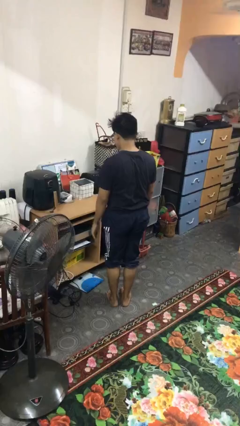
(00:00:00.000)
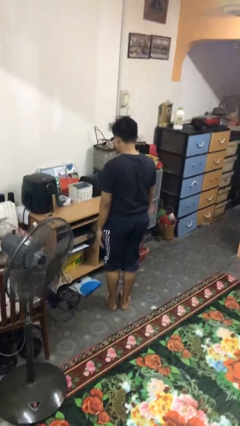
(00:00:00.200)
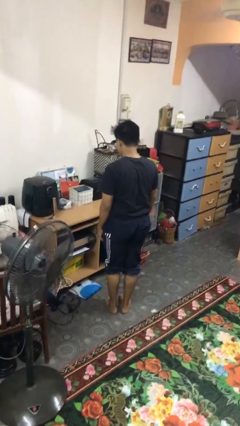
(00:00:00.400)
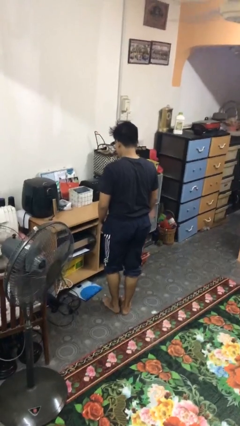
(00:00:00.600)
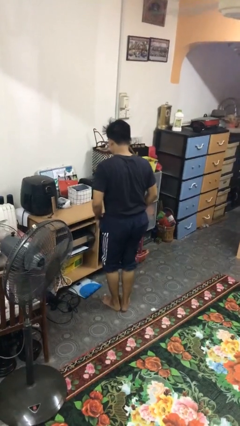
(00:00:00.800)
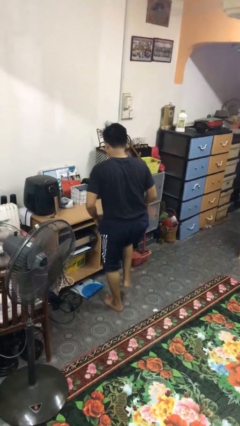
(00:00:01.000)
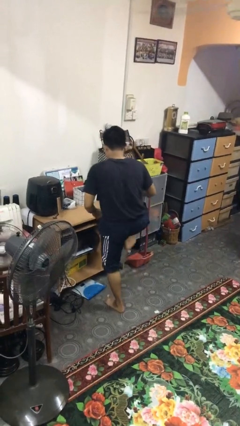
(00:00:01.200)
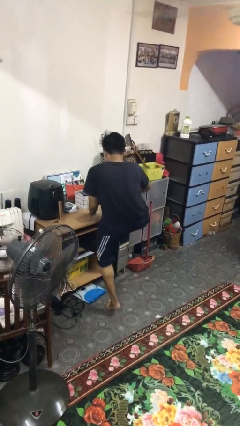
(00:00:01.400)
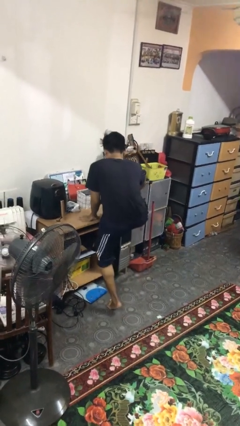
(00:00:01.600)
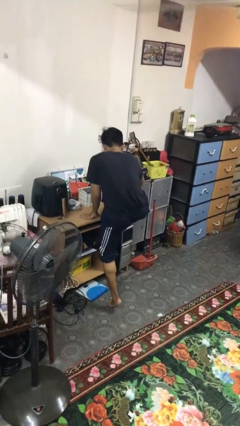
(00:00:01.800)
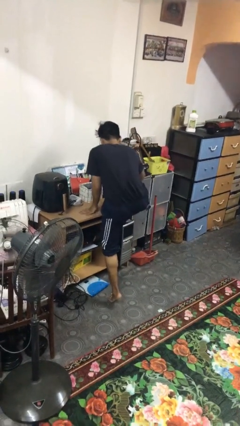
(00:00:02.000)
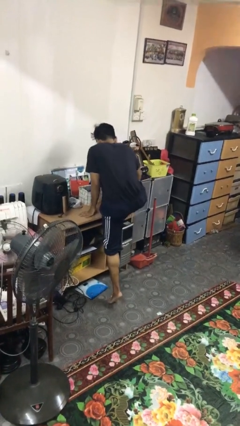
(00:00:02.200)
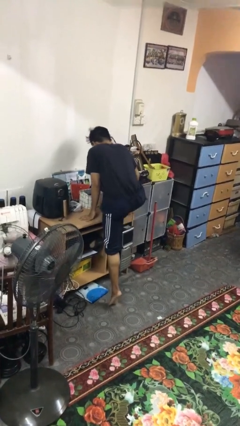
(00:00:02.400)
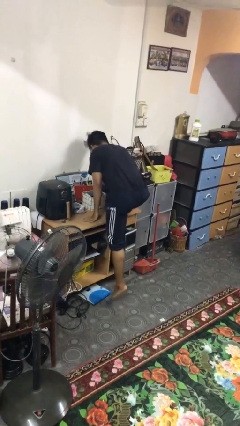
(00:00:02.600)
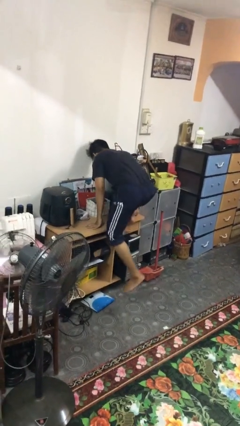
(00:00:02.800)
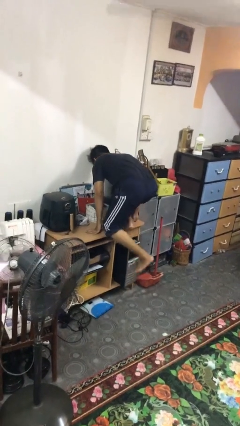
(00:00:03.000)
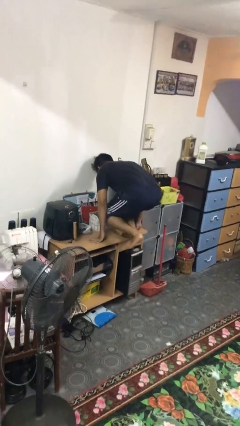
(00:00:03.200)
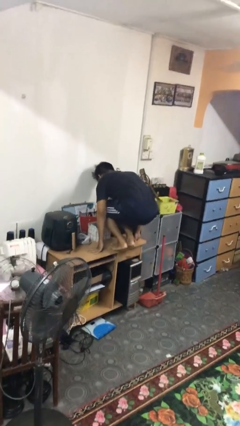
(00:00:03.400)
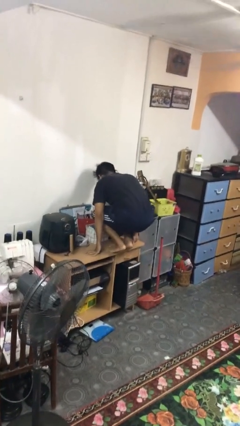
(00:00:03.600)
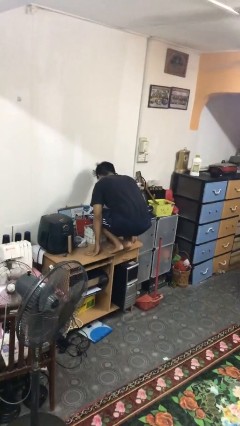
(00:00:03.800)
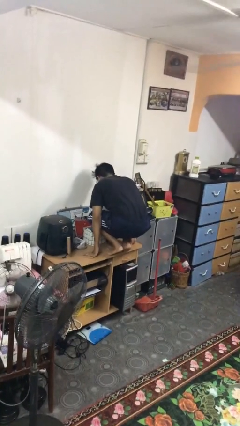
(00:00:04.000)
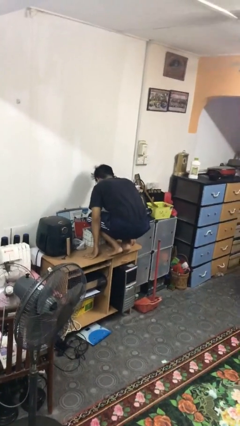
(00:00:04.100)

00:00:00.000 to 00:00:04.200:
person climbs on table

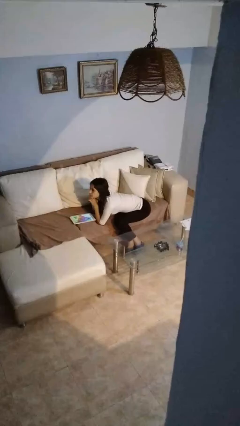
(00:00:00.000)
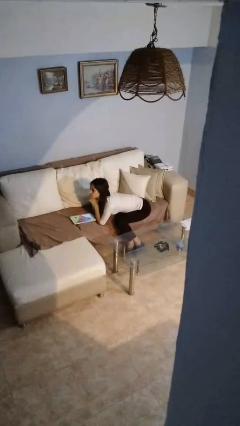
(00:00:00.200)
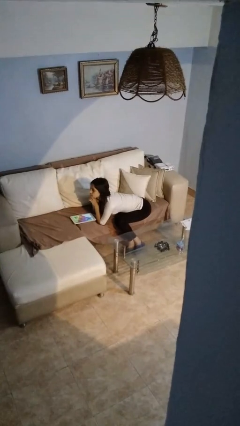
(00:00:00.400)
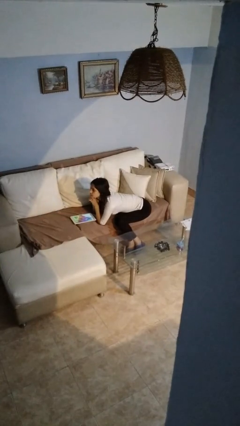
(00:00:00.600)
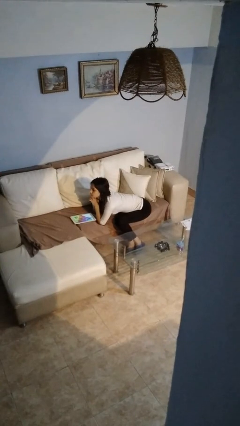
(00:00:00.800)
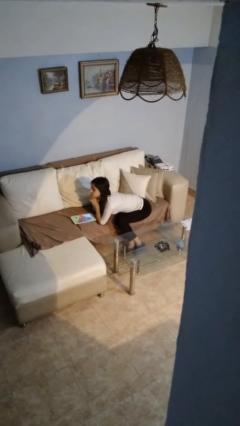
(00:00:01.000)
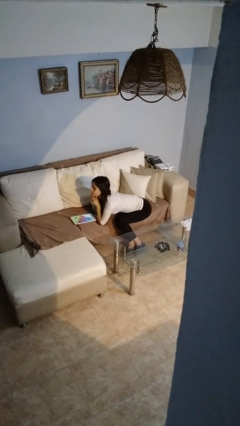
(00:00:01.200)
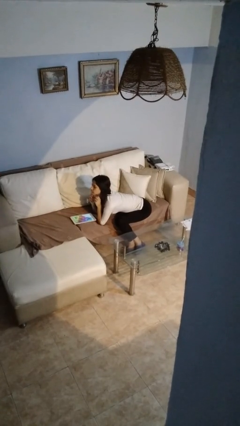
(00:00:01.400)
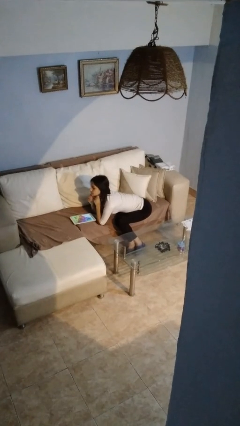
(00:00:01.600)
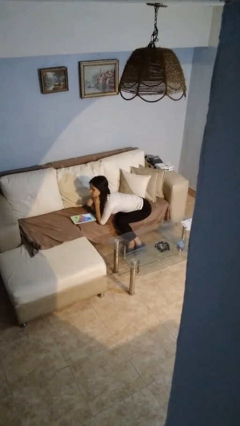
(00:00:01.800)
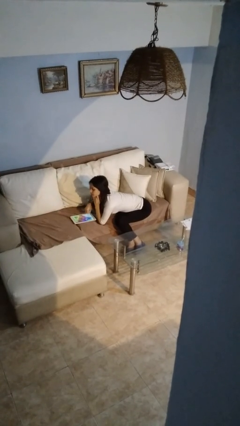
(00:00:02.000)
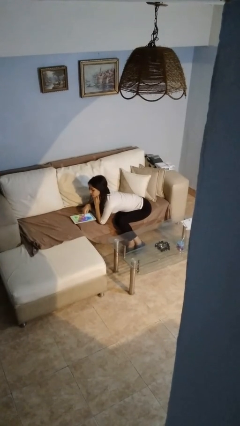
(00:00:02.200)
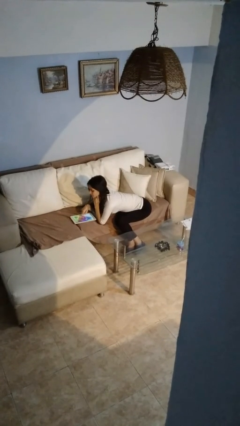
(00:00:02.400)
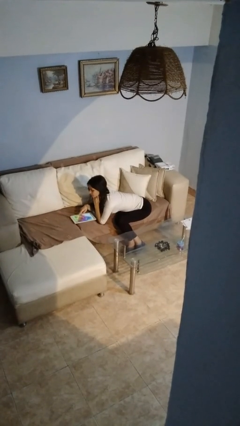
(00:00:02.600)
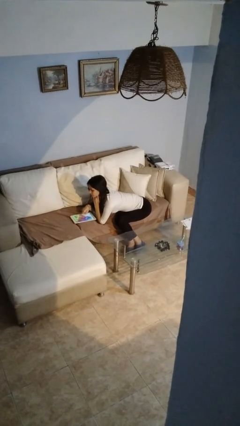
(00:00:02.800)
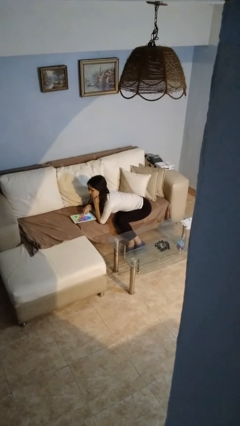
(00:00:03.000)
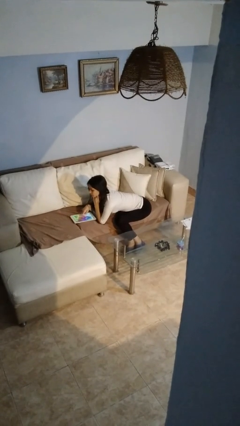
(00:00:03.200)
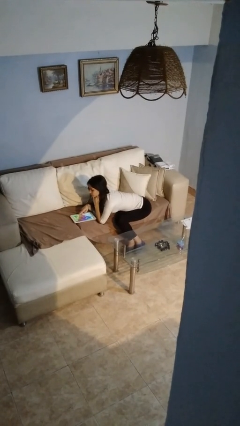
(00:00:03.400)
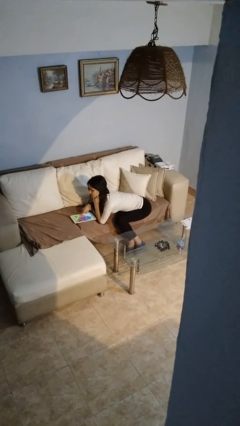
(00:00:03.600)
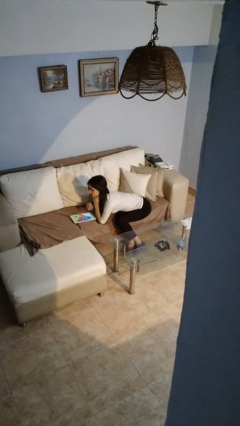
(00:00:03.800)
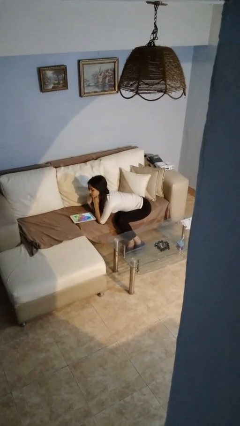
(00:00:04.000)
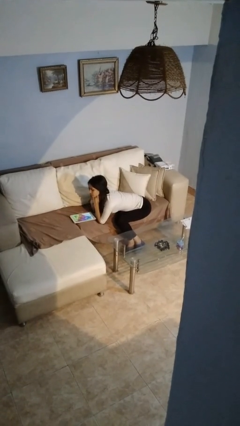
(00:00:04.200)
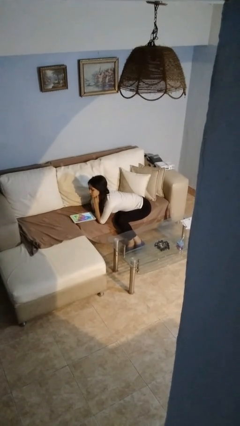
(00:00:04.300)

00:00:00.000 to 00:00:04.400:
person interacts with tablet

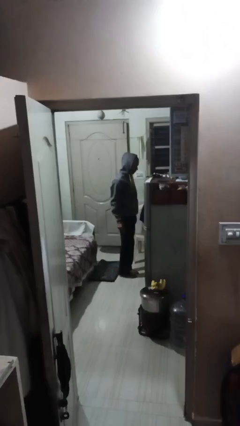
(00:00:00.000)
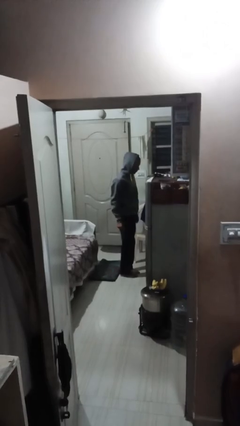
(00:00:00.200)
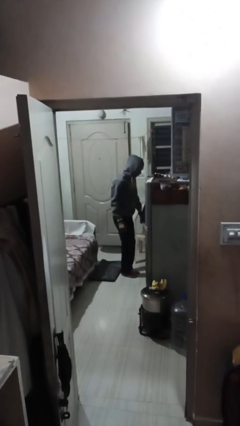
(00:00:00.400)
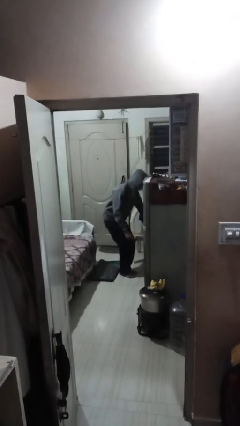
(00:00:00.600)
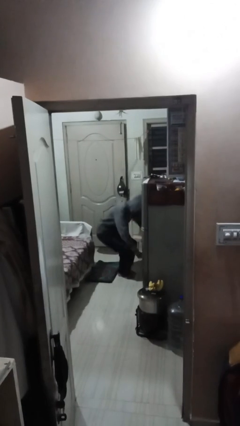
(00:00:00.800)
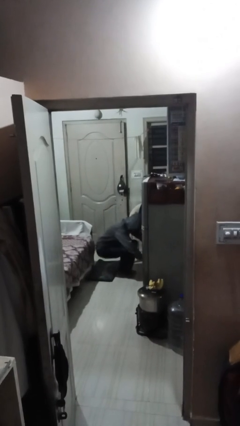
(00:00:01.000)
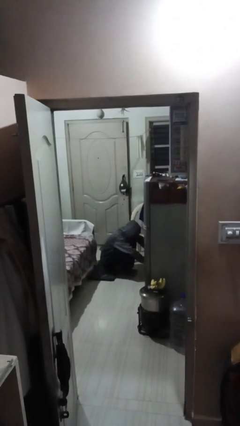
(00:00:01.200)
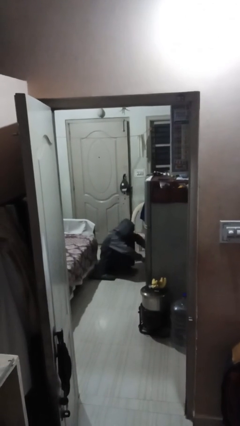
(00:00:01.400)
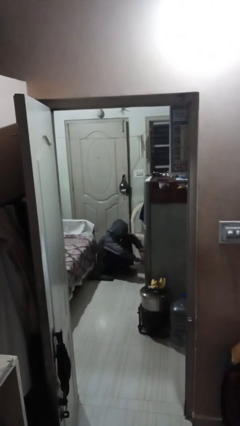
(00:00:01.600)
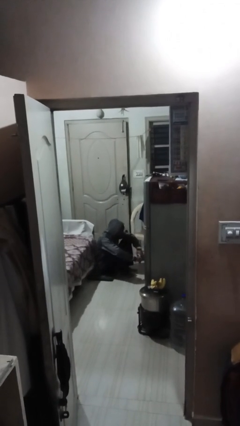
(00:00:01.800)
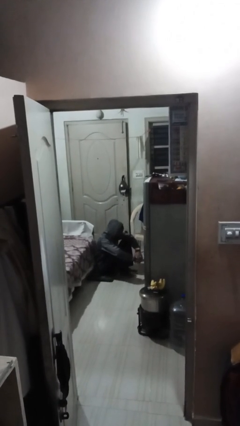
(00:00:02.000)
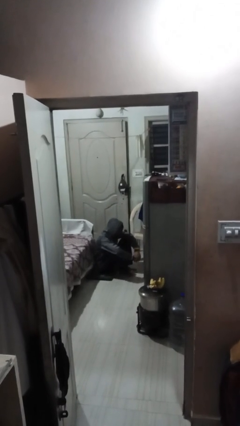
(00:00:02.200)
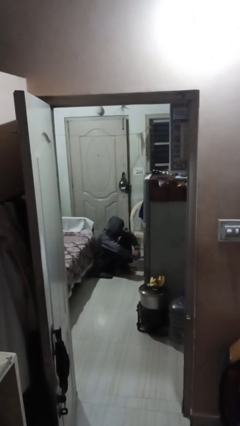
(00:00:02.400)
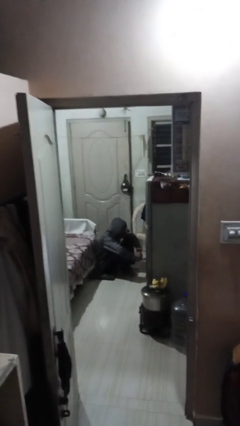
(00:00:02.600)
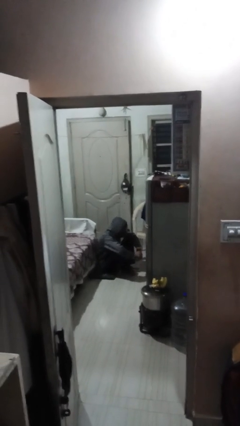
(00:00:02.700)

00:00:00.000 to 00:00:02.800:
person sits down
